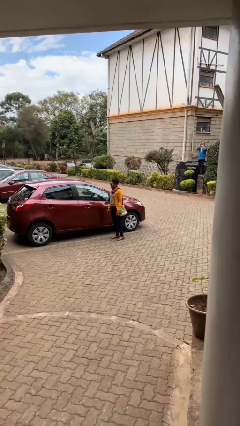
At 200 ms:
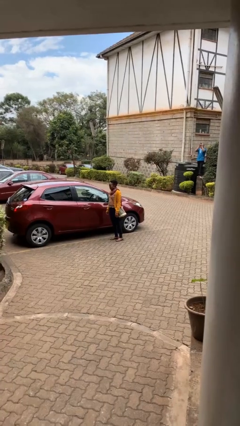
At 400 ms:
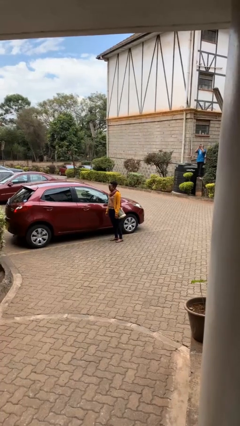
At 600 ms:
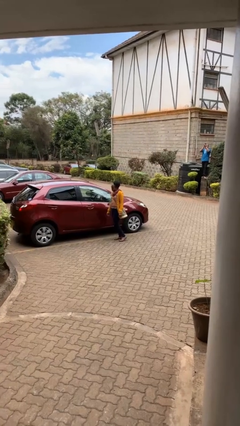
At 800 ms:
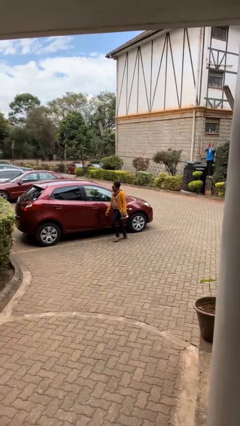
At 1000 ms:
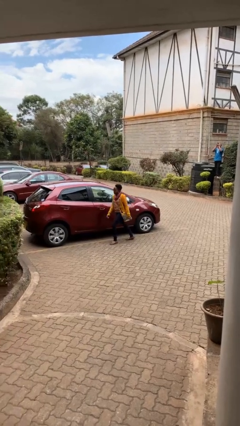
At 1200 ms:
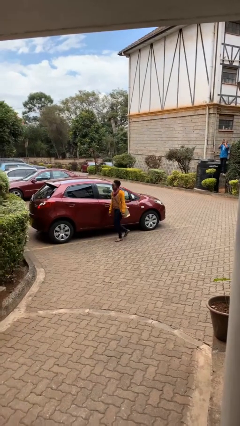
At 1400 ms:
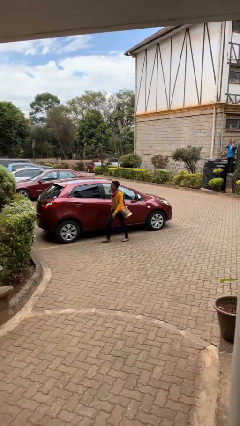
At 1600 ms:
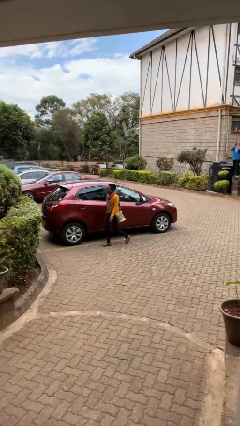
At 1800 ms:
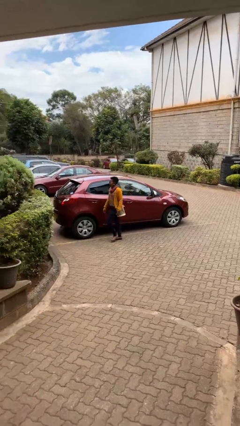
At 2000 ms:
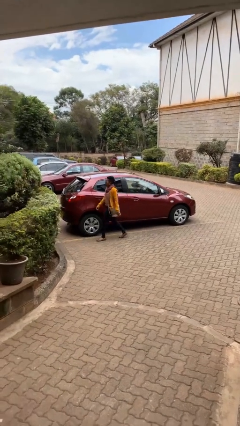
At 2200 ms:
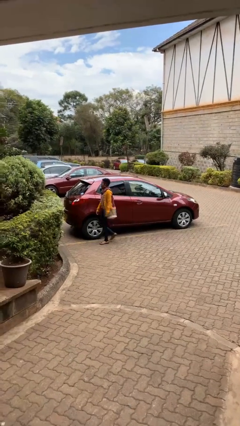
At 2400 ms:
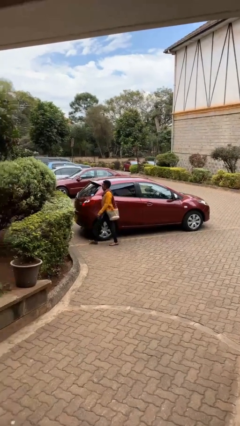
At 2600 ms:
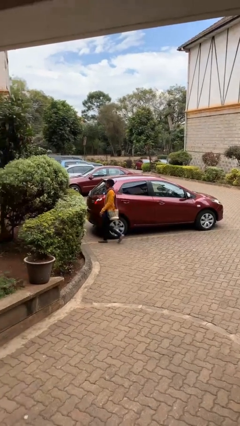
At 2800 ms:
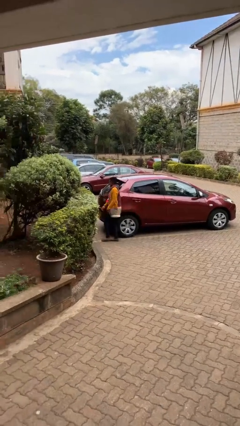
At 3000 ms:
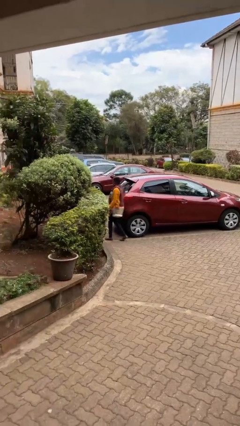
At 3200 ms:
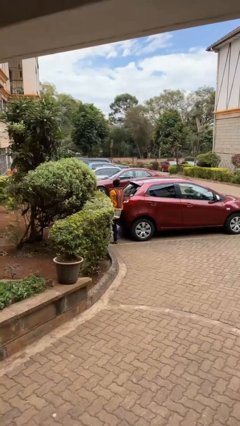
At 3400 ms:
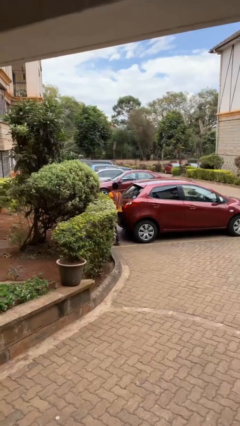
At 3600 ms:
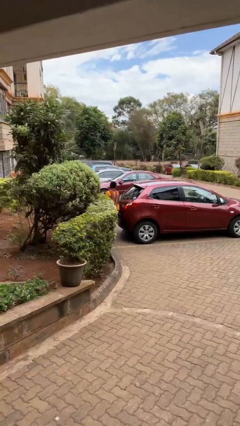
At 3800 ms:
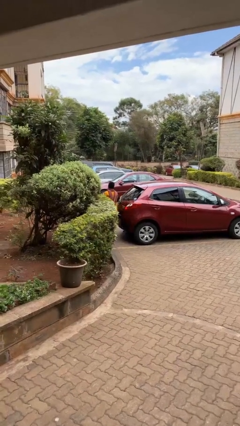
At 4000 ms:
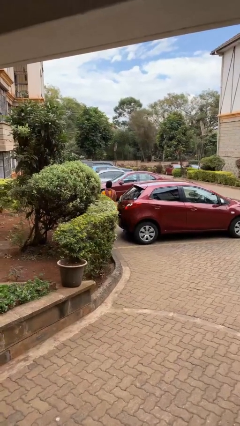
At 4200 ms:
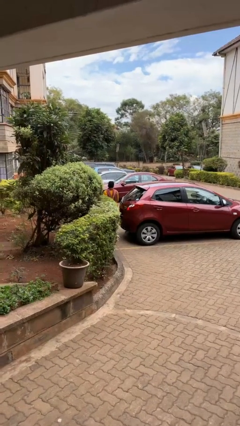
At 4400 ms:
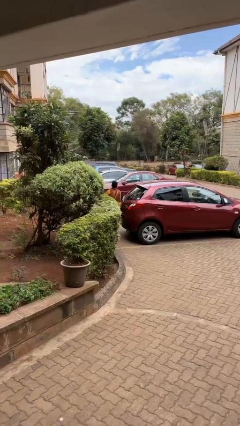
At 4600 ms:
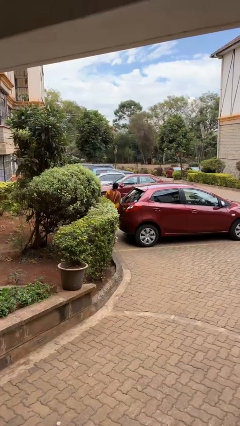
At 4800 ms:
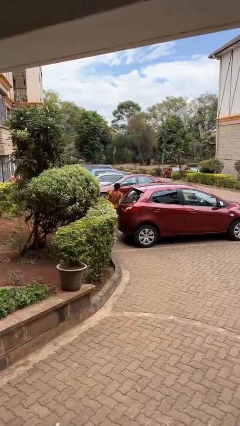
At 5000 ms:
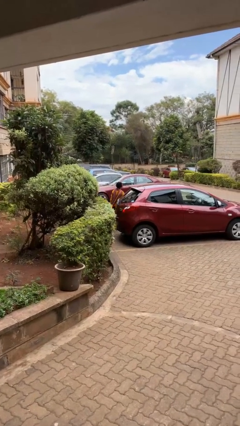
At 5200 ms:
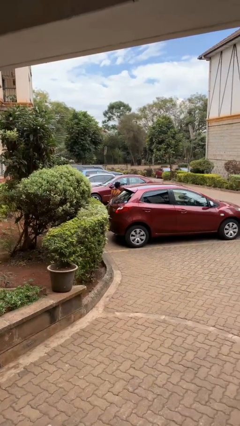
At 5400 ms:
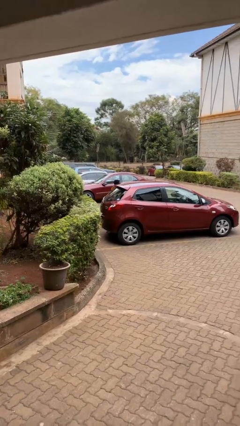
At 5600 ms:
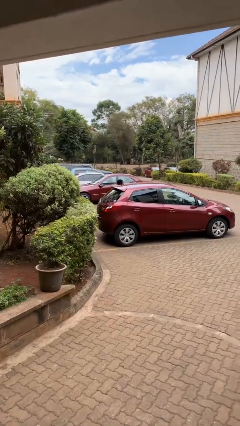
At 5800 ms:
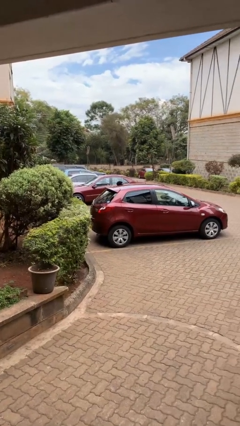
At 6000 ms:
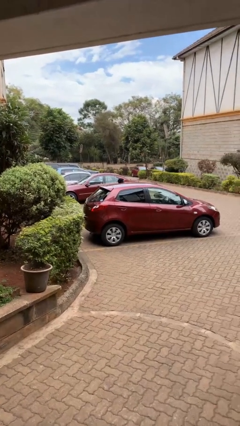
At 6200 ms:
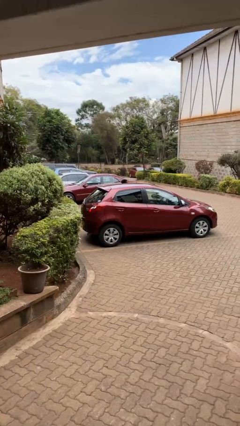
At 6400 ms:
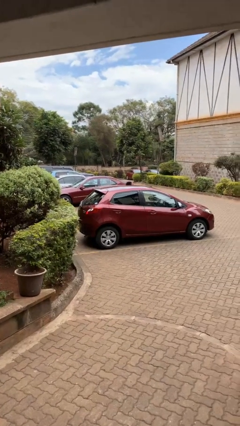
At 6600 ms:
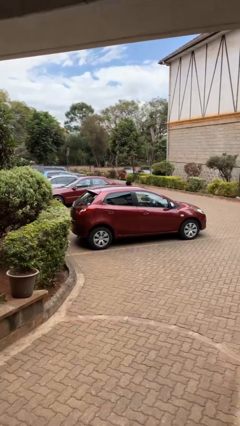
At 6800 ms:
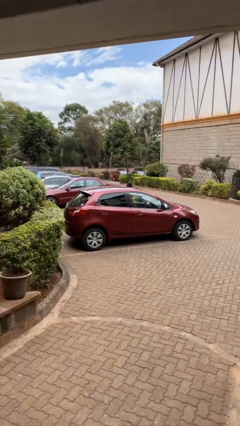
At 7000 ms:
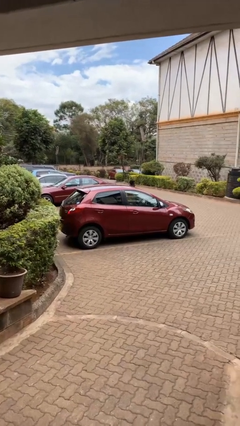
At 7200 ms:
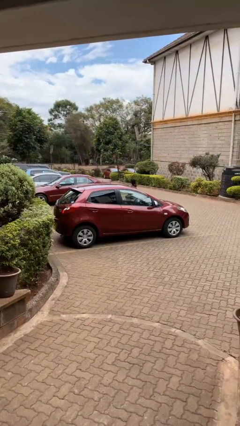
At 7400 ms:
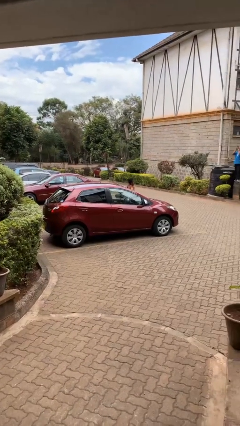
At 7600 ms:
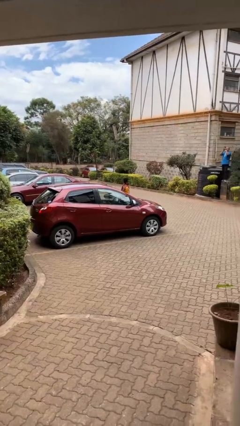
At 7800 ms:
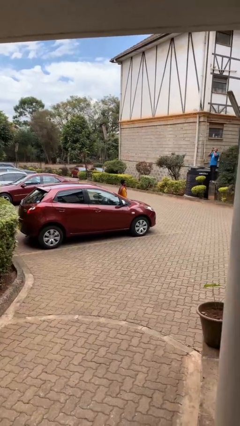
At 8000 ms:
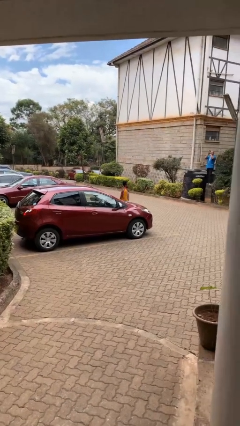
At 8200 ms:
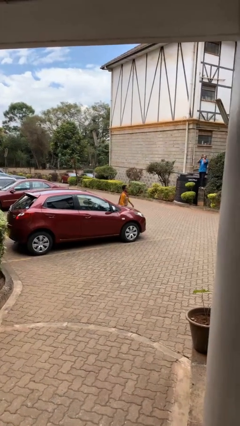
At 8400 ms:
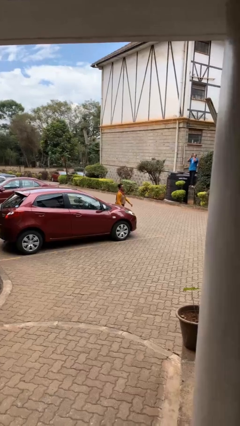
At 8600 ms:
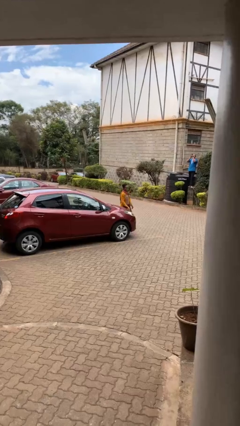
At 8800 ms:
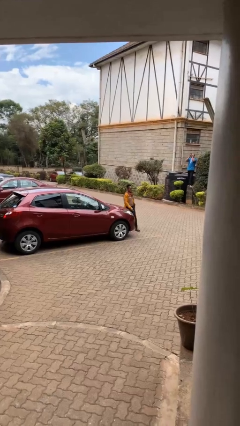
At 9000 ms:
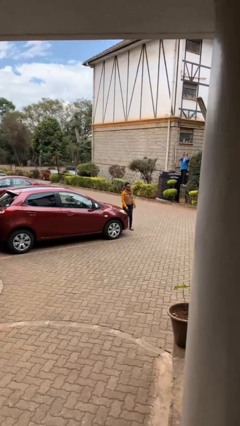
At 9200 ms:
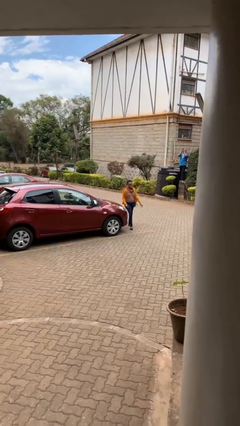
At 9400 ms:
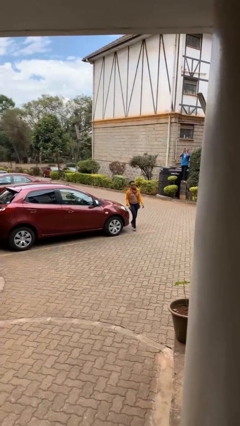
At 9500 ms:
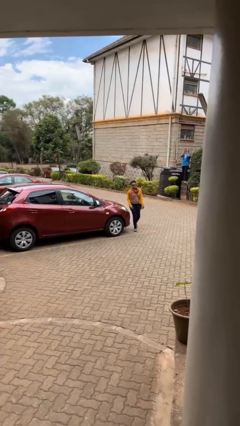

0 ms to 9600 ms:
person walks around car

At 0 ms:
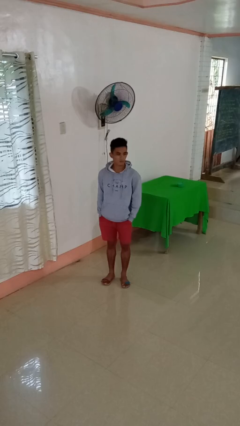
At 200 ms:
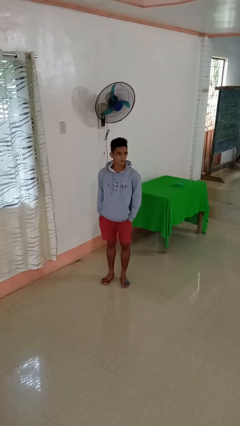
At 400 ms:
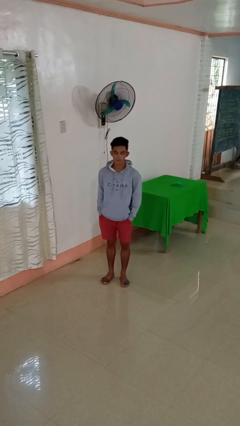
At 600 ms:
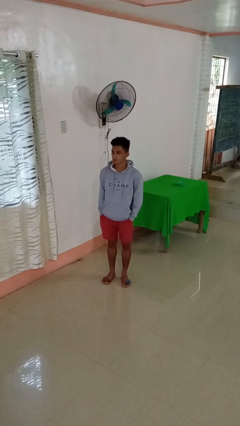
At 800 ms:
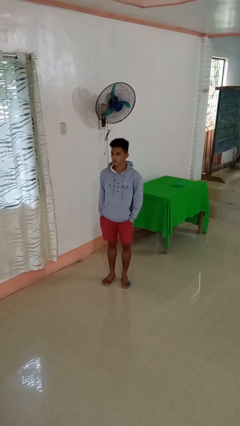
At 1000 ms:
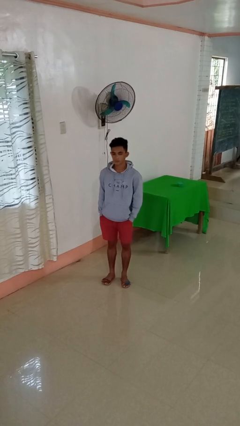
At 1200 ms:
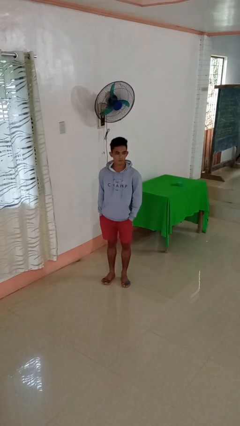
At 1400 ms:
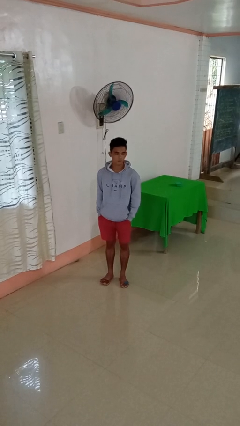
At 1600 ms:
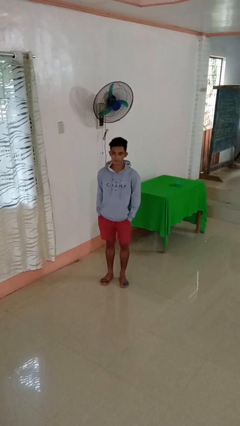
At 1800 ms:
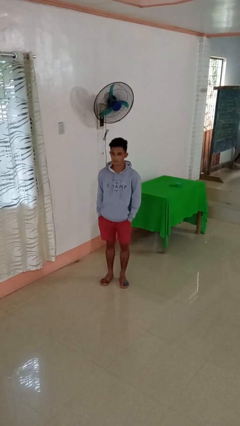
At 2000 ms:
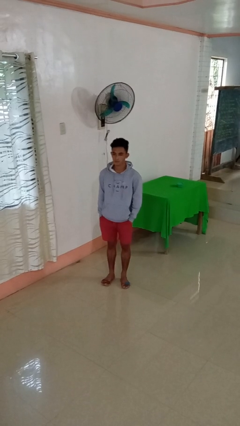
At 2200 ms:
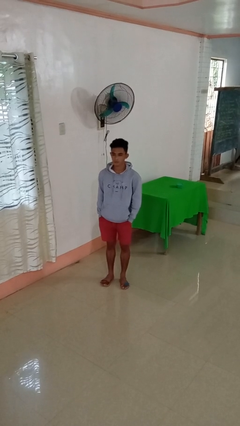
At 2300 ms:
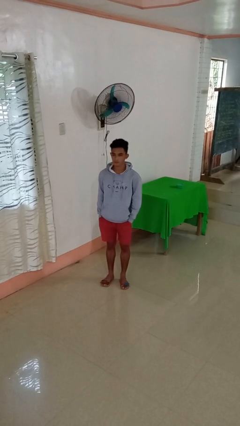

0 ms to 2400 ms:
person shakes head

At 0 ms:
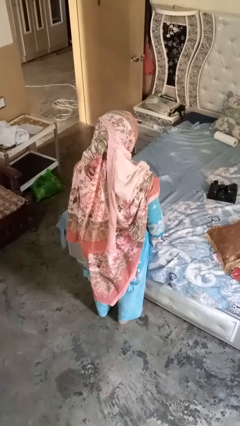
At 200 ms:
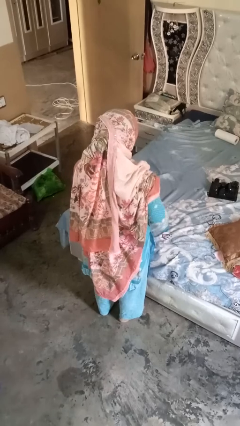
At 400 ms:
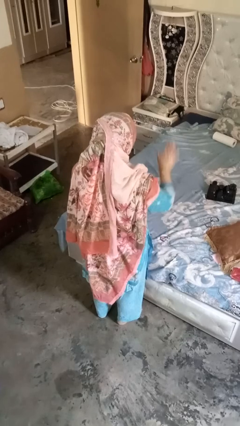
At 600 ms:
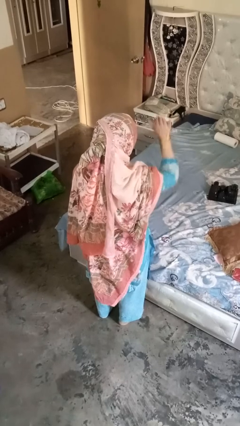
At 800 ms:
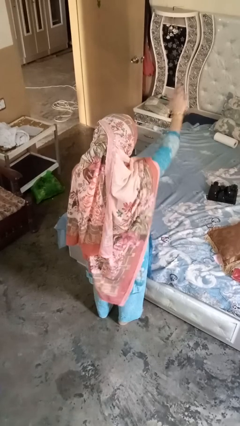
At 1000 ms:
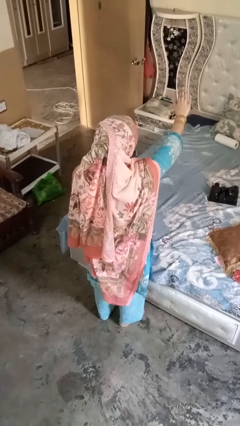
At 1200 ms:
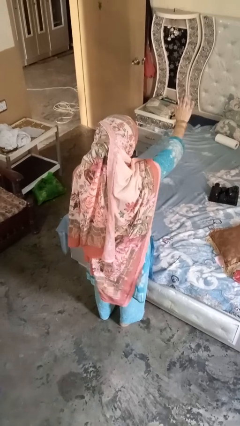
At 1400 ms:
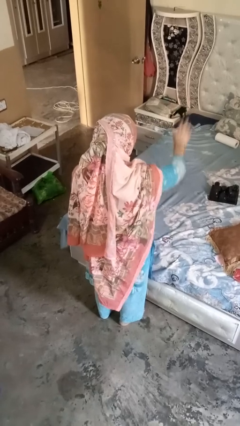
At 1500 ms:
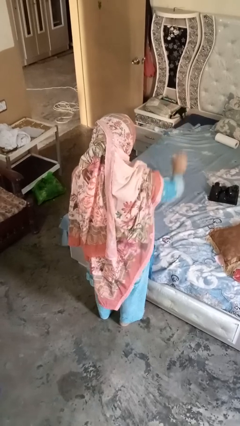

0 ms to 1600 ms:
person gestures stop

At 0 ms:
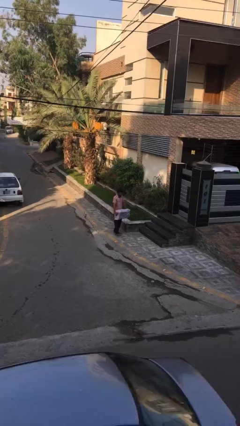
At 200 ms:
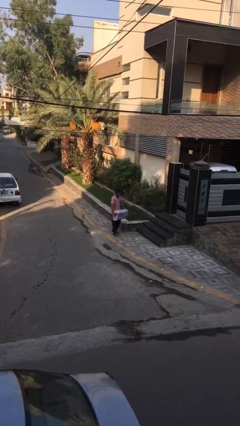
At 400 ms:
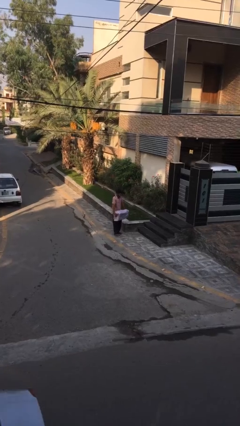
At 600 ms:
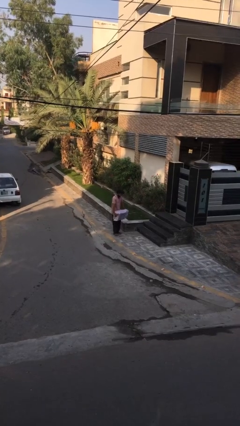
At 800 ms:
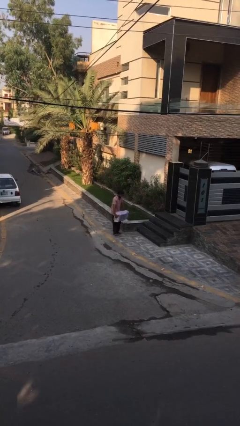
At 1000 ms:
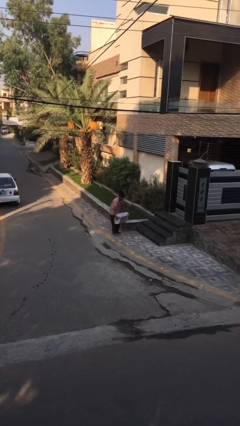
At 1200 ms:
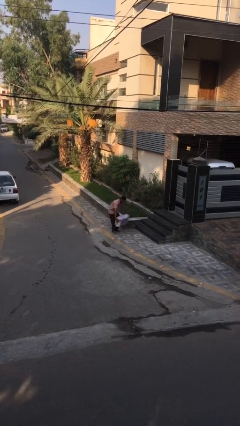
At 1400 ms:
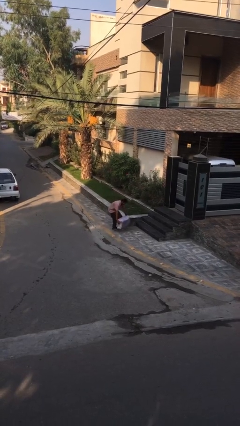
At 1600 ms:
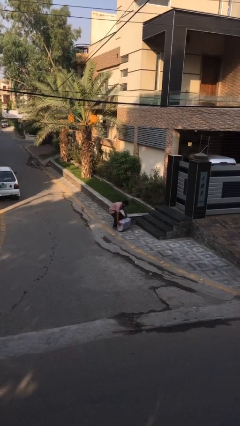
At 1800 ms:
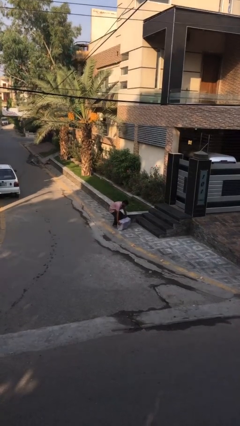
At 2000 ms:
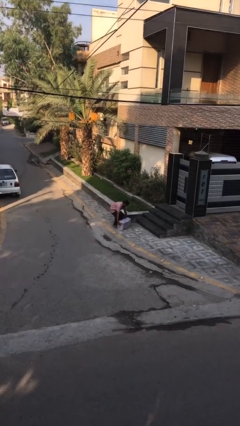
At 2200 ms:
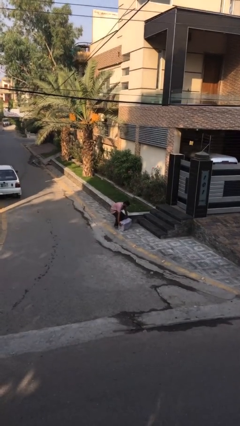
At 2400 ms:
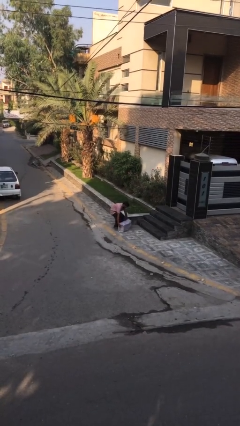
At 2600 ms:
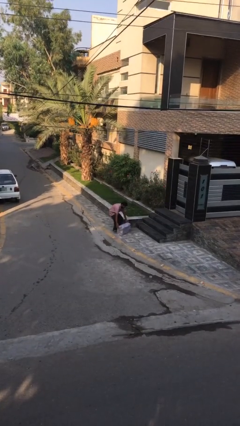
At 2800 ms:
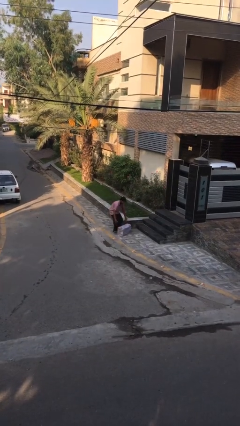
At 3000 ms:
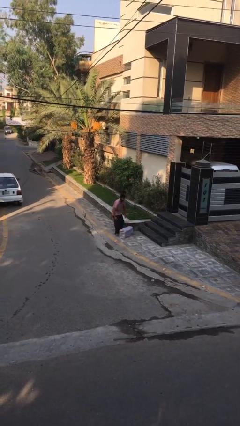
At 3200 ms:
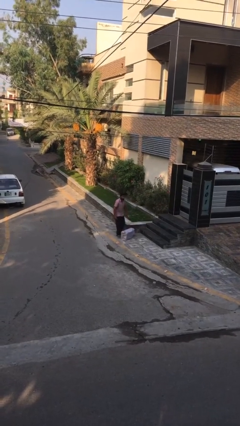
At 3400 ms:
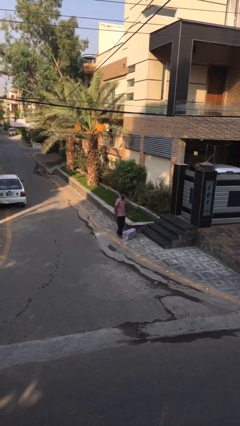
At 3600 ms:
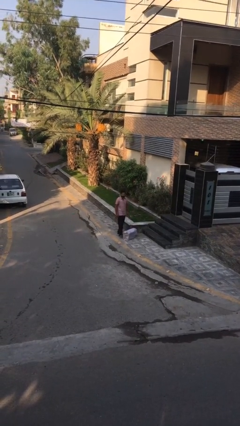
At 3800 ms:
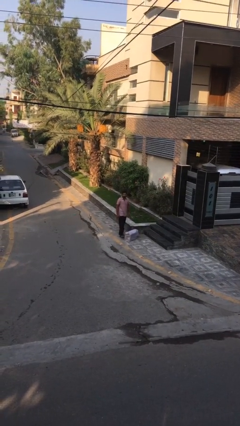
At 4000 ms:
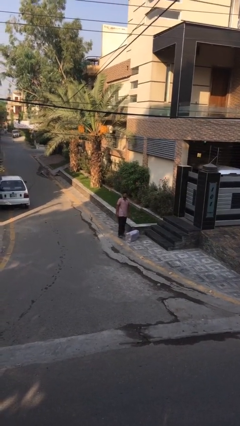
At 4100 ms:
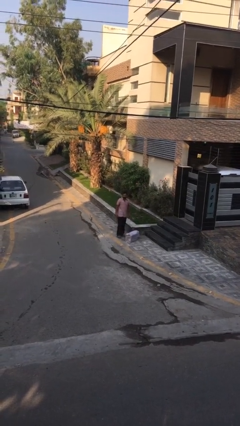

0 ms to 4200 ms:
person puts down object on floor
